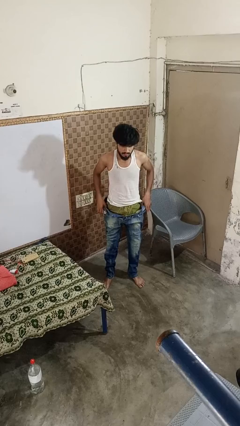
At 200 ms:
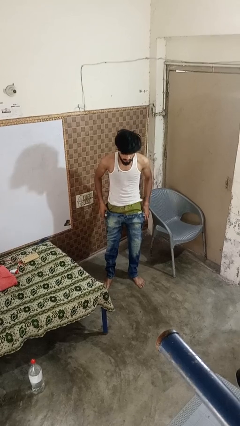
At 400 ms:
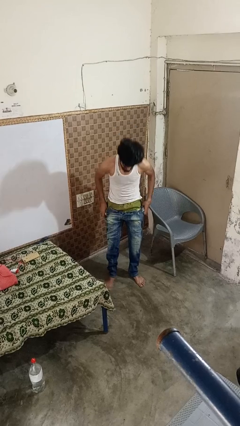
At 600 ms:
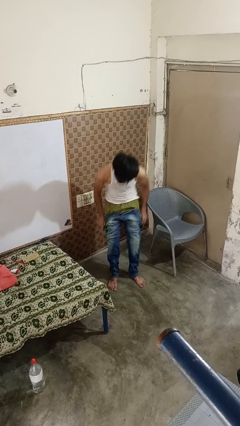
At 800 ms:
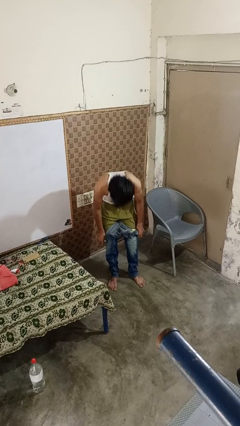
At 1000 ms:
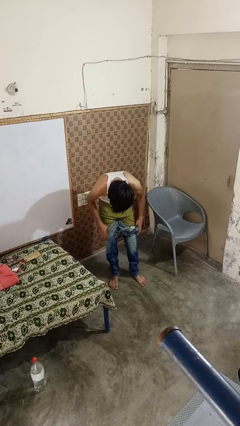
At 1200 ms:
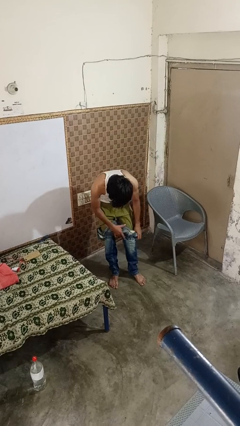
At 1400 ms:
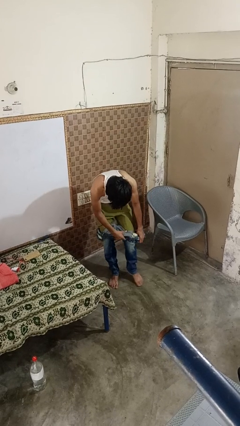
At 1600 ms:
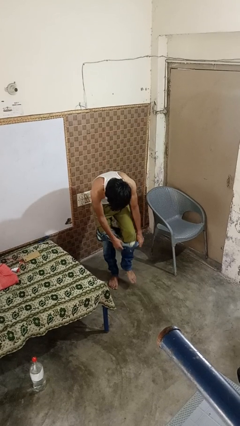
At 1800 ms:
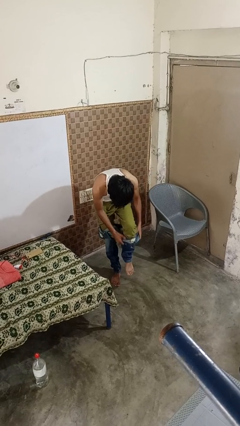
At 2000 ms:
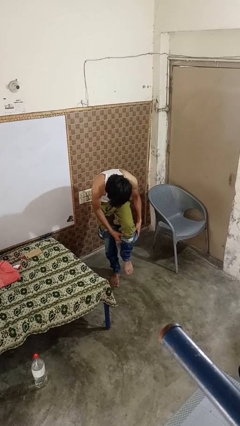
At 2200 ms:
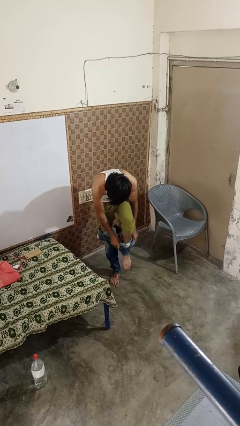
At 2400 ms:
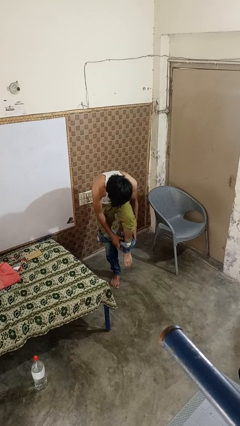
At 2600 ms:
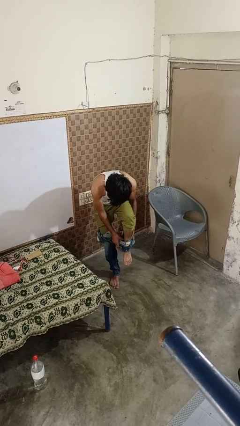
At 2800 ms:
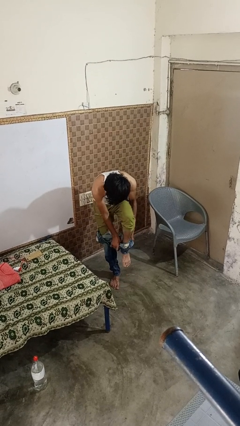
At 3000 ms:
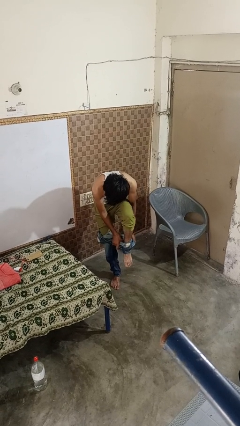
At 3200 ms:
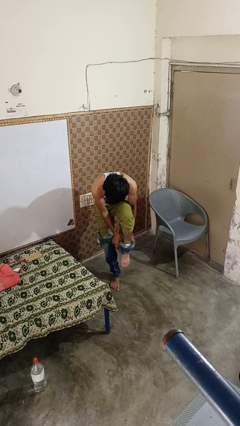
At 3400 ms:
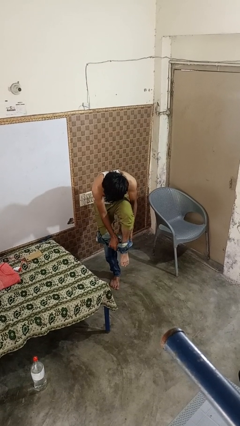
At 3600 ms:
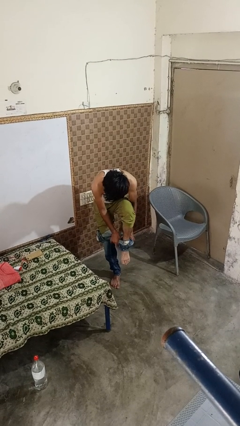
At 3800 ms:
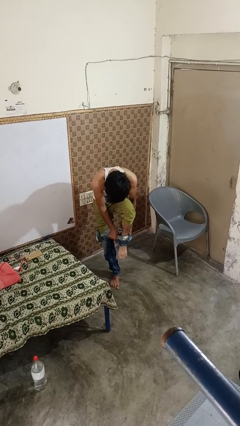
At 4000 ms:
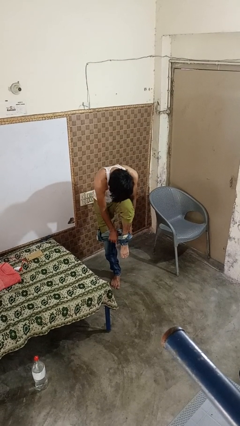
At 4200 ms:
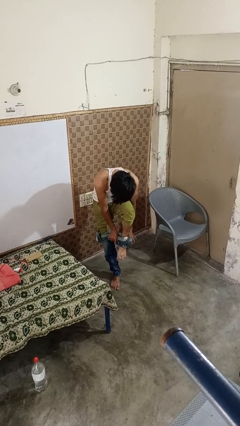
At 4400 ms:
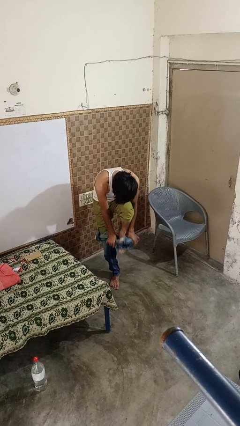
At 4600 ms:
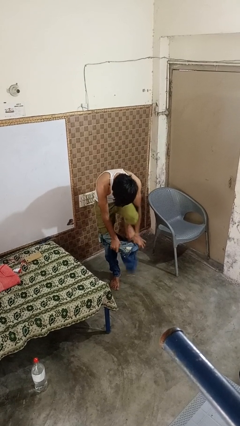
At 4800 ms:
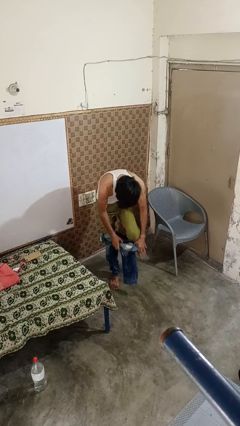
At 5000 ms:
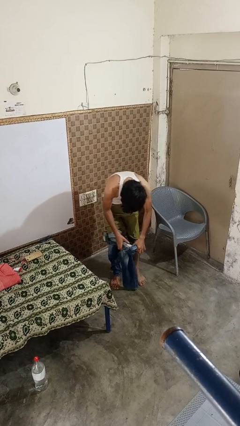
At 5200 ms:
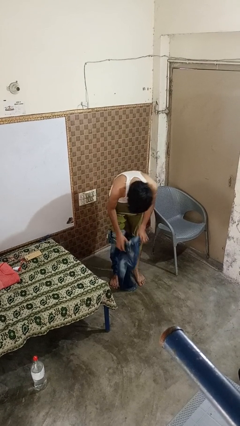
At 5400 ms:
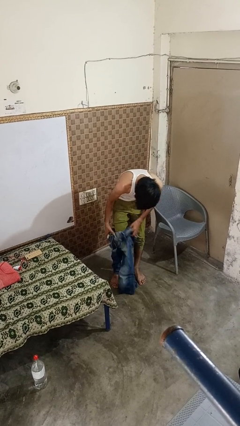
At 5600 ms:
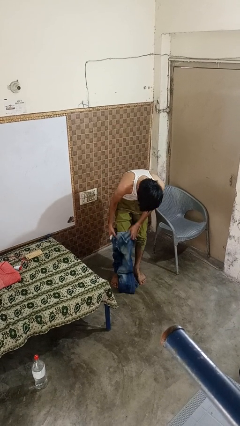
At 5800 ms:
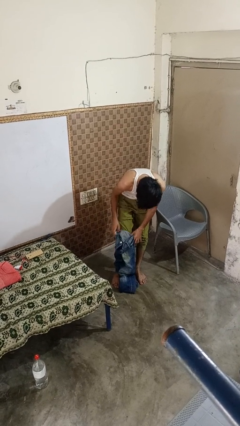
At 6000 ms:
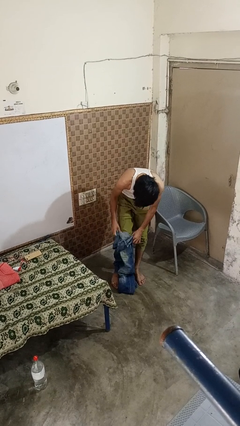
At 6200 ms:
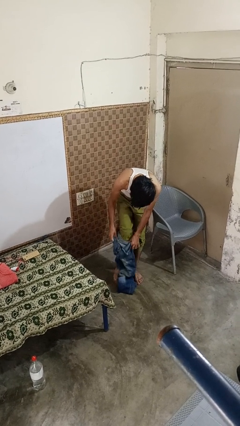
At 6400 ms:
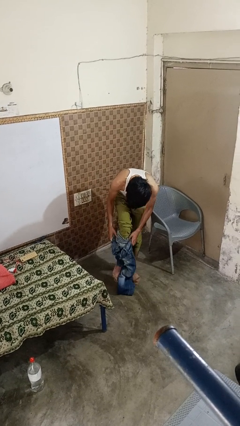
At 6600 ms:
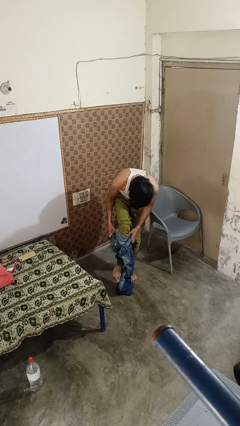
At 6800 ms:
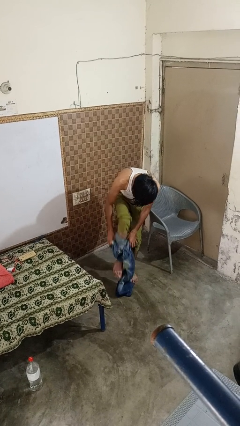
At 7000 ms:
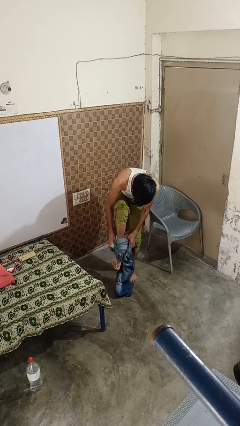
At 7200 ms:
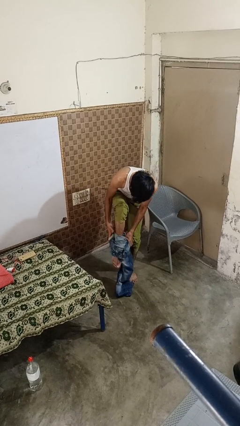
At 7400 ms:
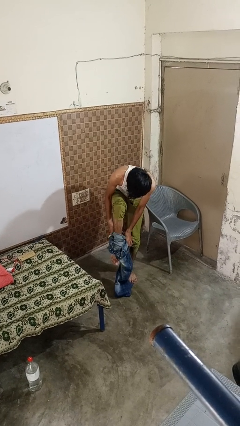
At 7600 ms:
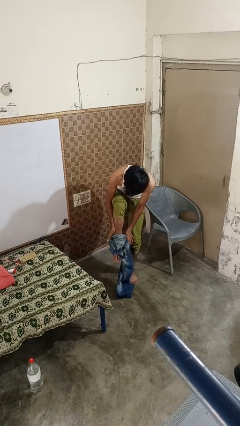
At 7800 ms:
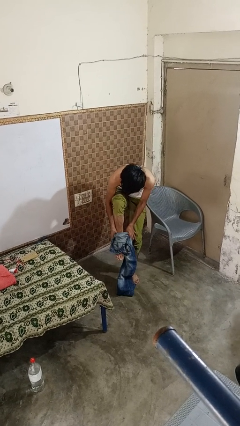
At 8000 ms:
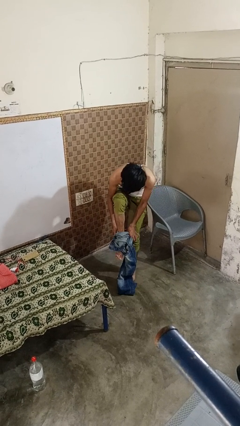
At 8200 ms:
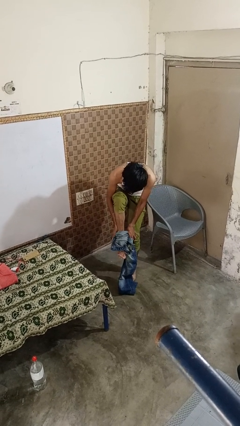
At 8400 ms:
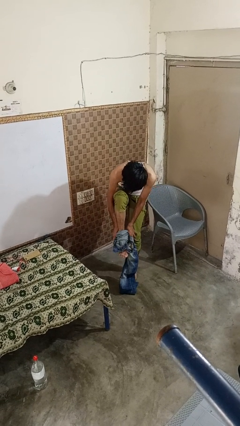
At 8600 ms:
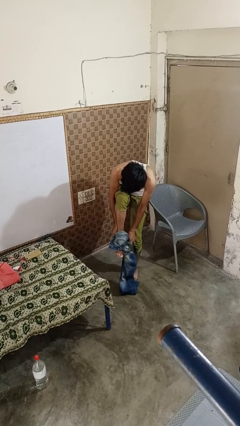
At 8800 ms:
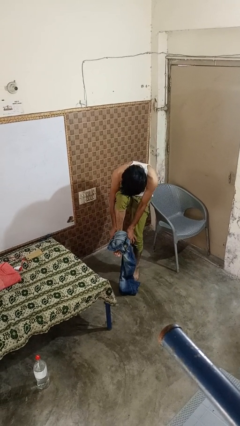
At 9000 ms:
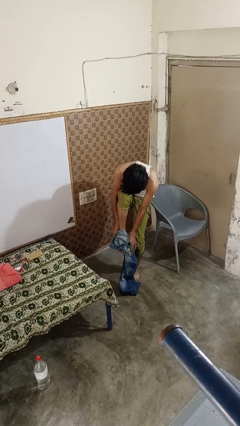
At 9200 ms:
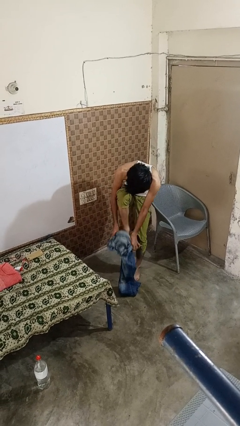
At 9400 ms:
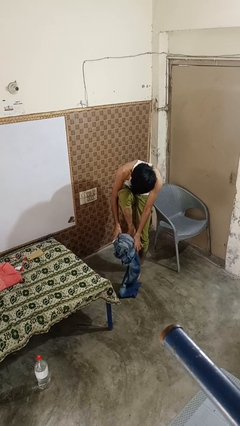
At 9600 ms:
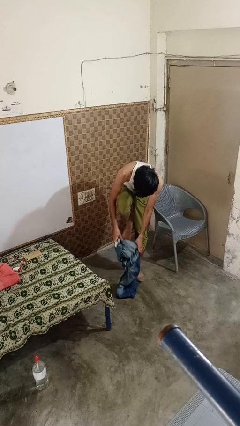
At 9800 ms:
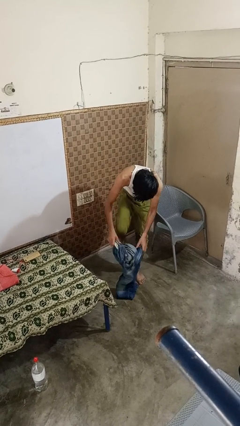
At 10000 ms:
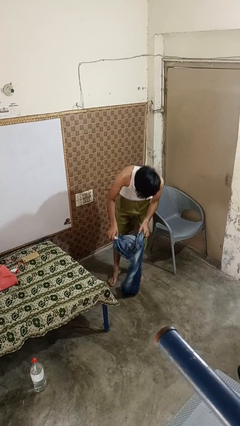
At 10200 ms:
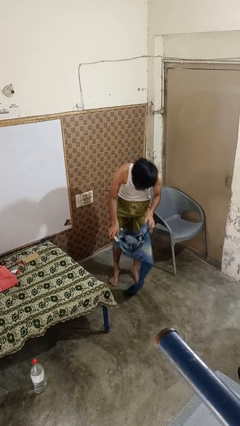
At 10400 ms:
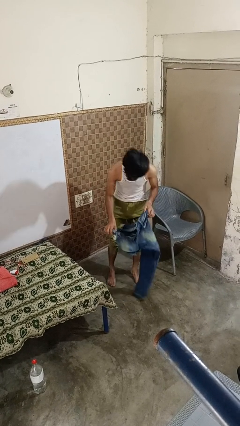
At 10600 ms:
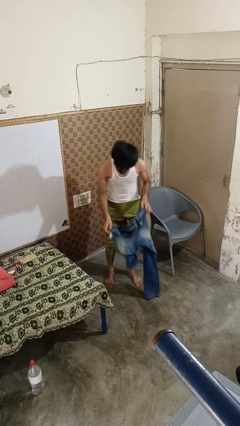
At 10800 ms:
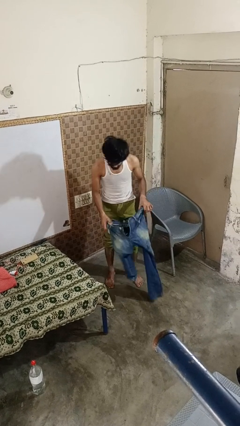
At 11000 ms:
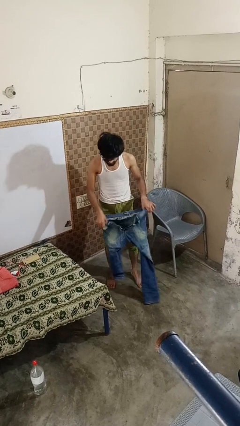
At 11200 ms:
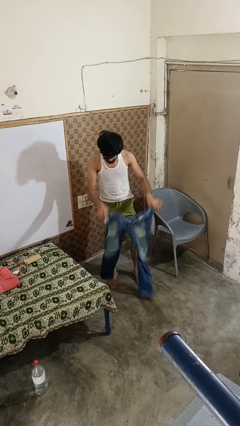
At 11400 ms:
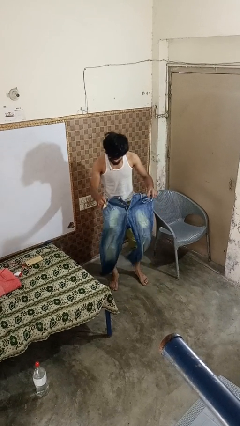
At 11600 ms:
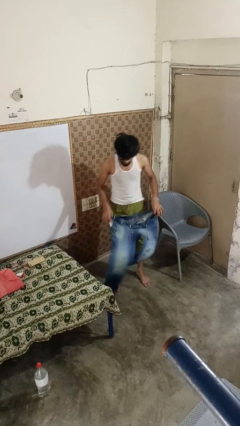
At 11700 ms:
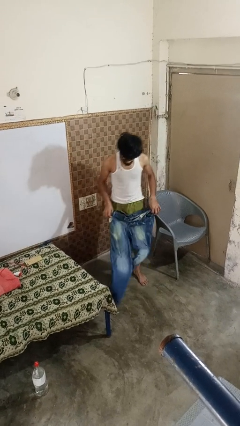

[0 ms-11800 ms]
person takes off pants

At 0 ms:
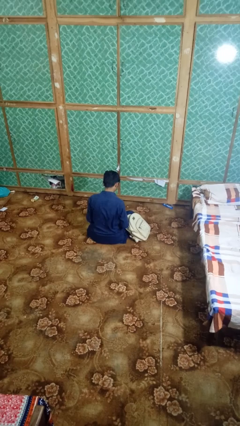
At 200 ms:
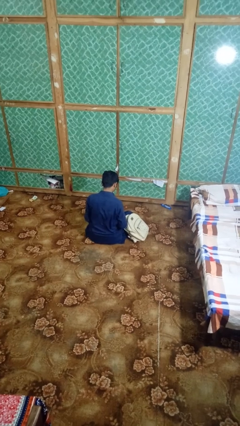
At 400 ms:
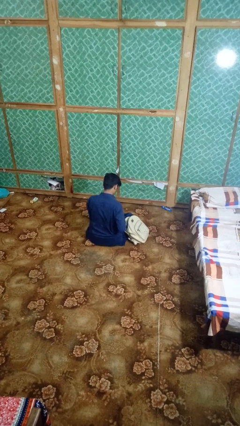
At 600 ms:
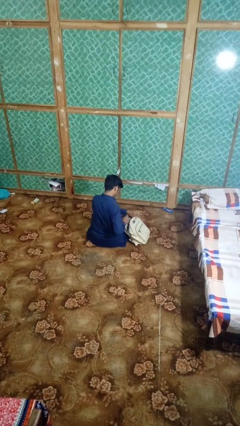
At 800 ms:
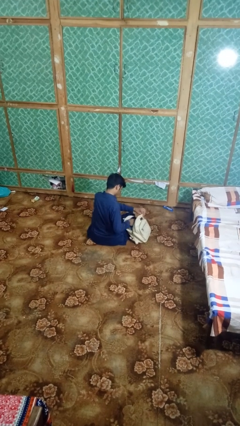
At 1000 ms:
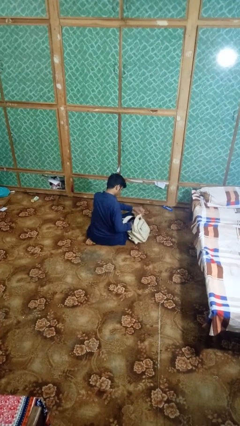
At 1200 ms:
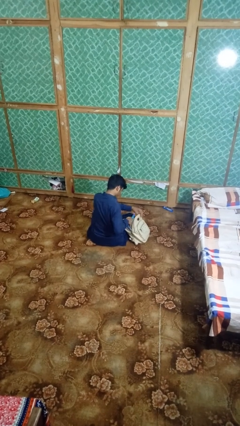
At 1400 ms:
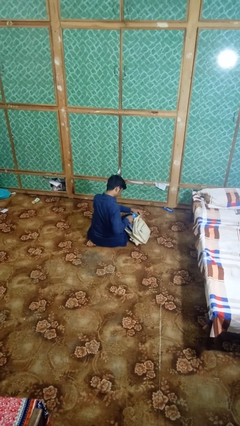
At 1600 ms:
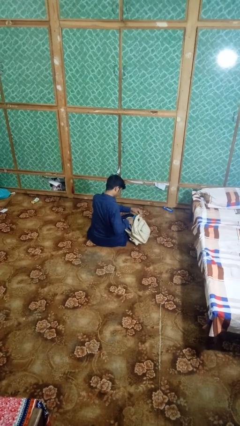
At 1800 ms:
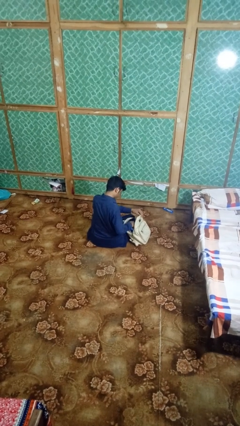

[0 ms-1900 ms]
person searches in backpack

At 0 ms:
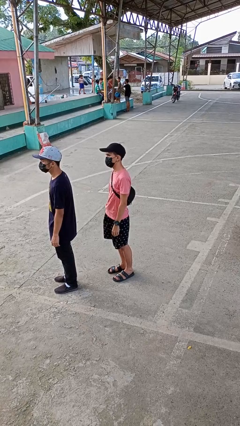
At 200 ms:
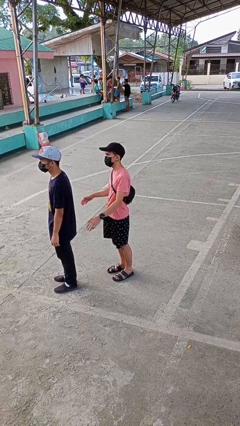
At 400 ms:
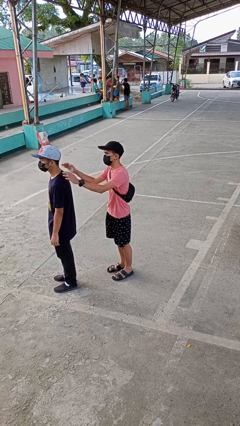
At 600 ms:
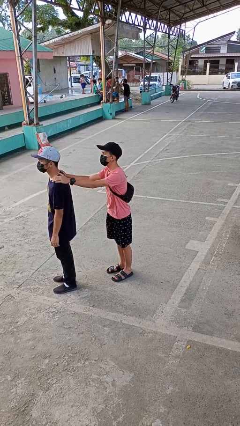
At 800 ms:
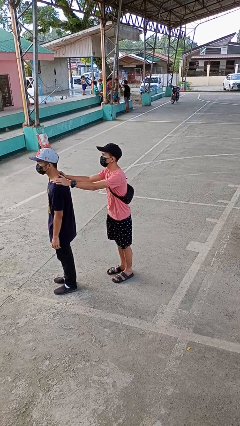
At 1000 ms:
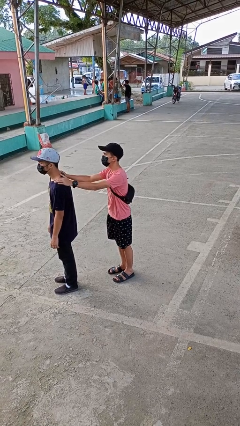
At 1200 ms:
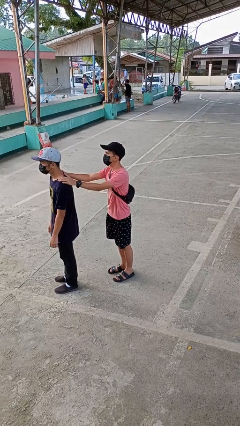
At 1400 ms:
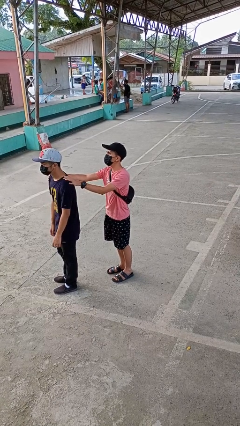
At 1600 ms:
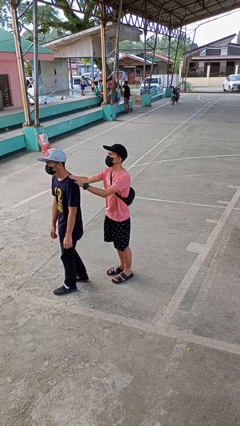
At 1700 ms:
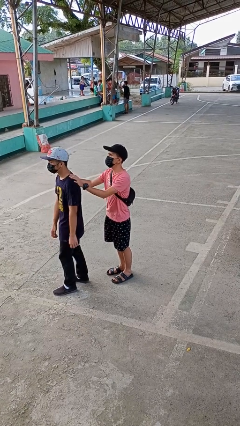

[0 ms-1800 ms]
person grabs person by shoulder

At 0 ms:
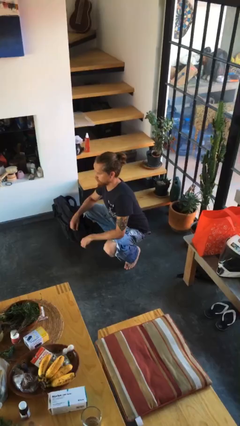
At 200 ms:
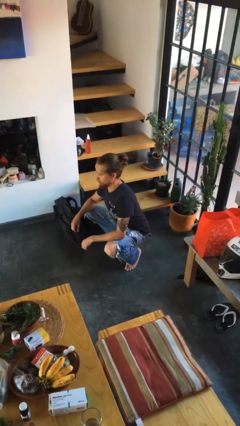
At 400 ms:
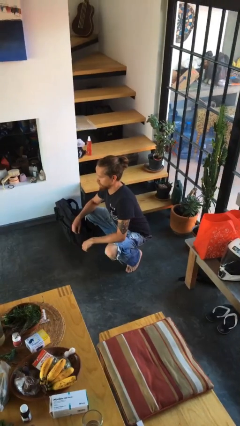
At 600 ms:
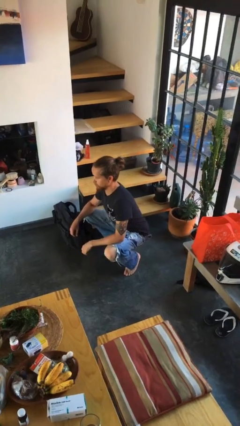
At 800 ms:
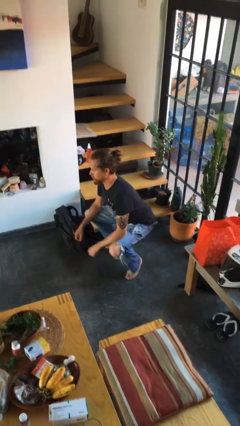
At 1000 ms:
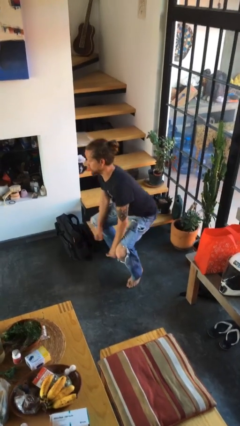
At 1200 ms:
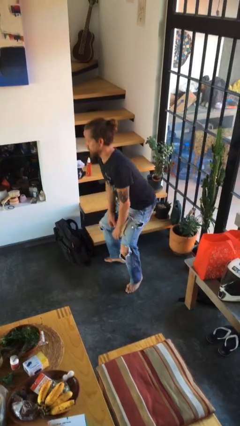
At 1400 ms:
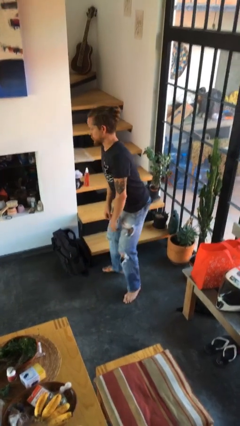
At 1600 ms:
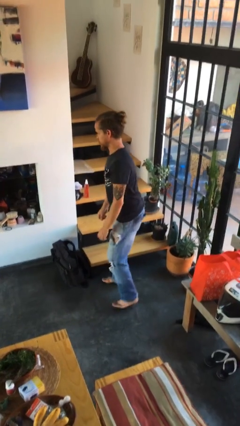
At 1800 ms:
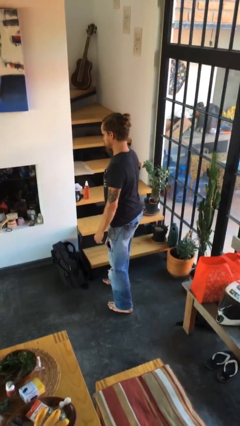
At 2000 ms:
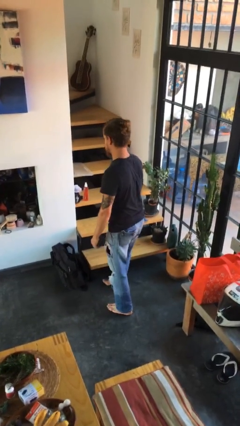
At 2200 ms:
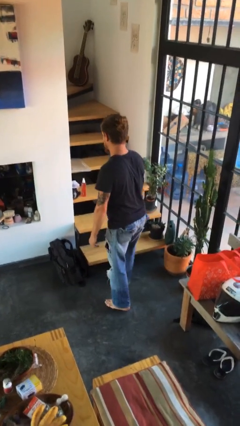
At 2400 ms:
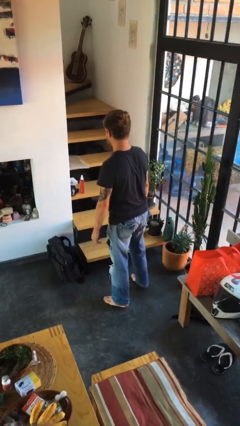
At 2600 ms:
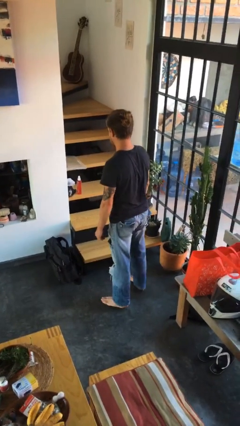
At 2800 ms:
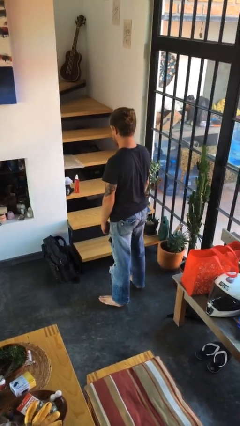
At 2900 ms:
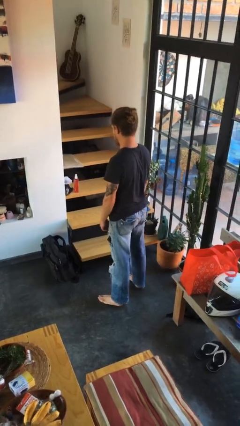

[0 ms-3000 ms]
person stands up
